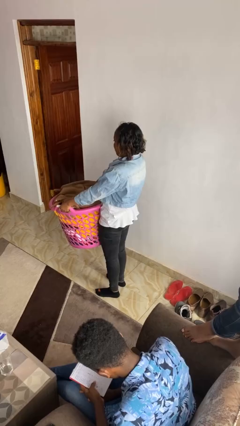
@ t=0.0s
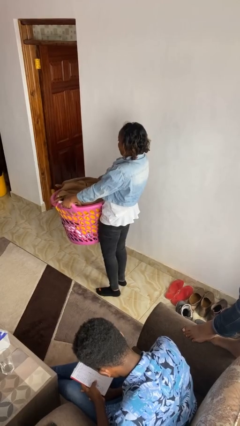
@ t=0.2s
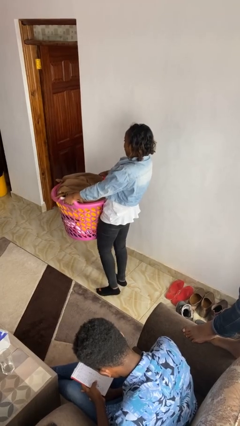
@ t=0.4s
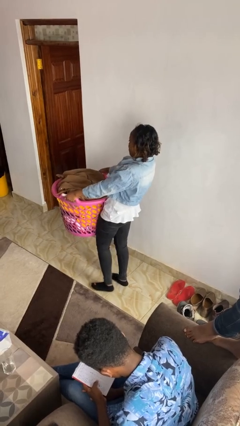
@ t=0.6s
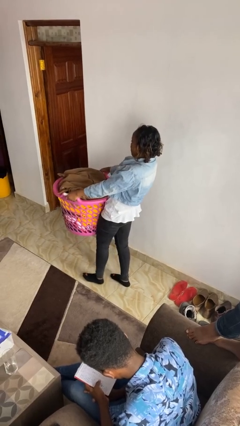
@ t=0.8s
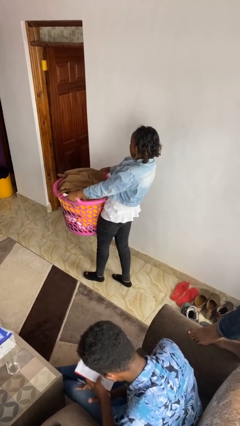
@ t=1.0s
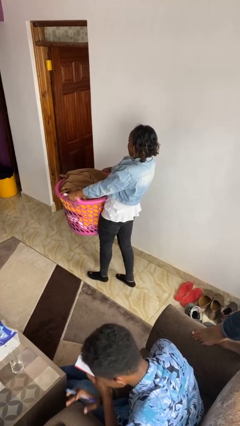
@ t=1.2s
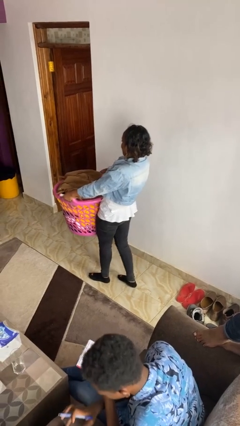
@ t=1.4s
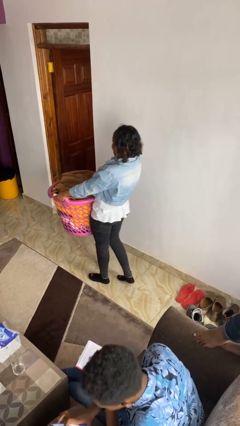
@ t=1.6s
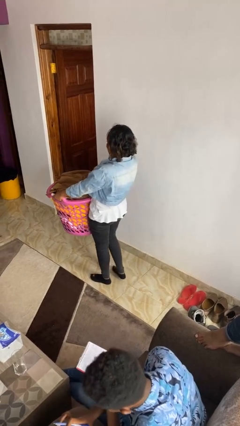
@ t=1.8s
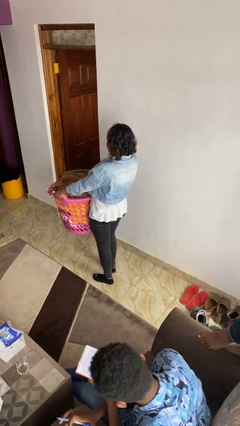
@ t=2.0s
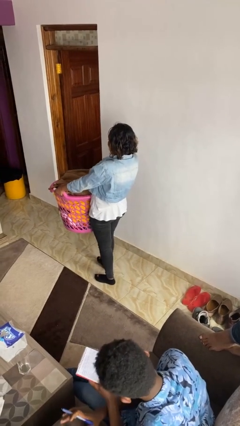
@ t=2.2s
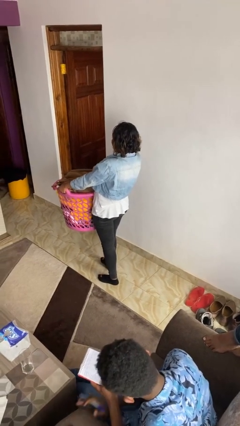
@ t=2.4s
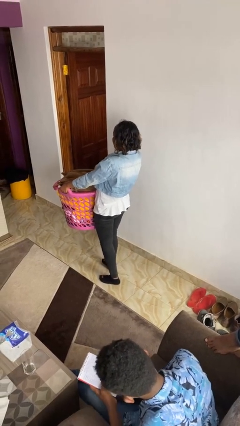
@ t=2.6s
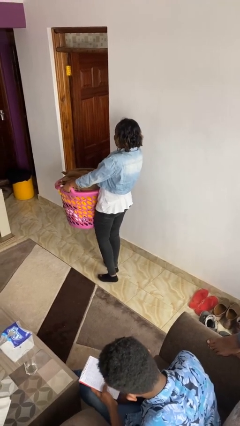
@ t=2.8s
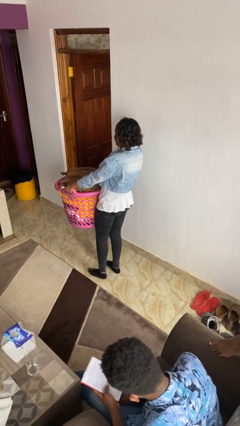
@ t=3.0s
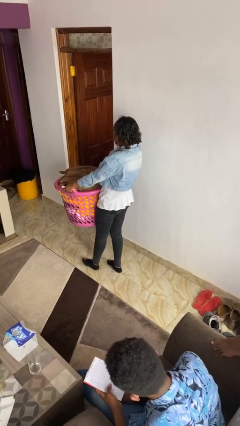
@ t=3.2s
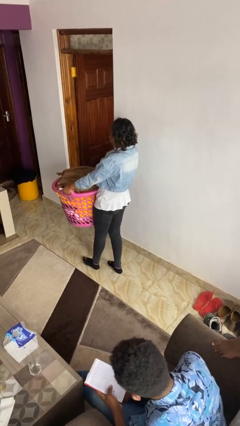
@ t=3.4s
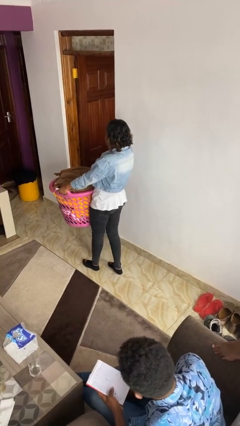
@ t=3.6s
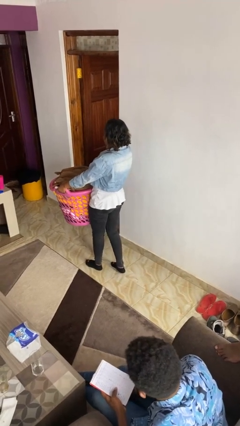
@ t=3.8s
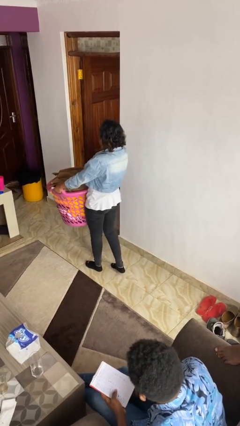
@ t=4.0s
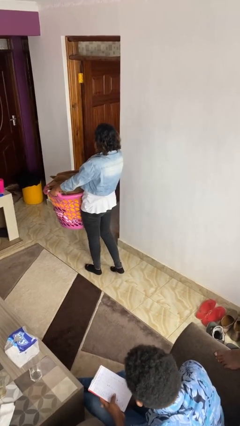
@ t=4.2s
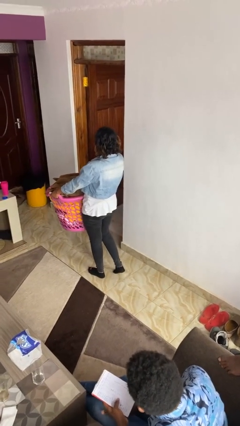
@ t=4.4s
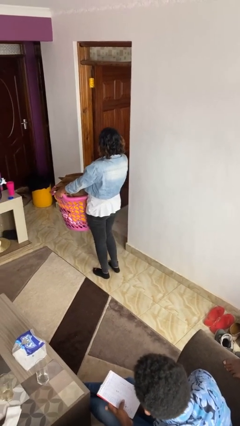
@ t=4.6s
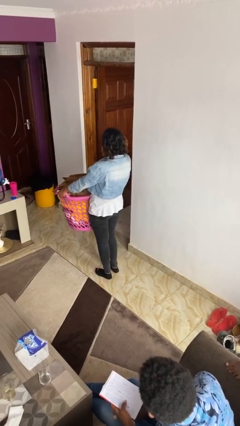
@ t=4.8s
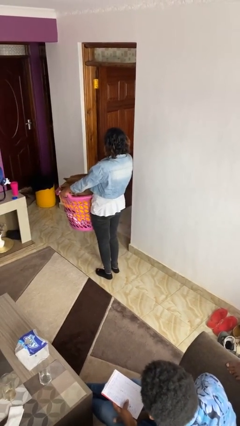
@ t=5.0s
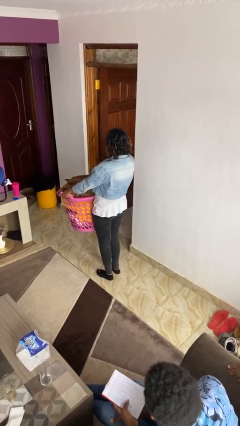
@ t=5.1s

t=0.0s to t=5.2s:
person carries laundry basket

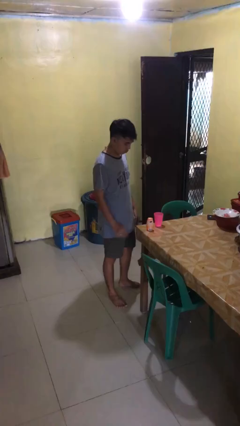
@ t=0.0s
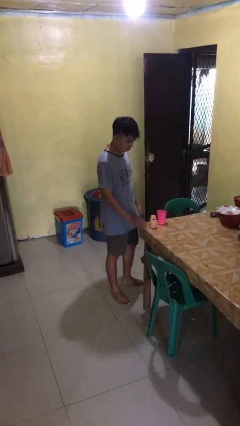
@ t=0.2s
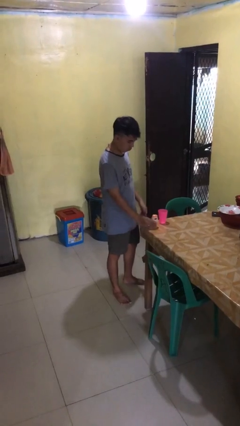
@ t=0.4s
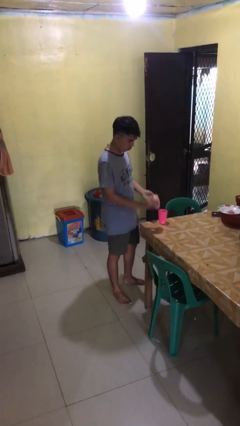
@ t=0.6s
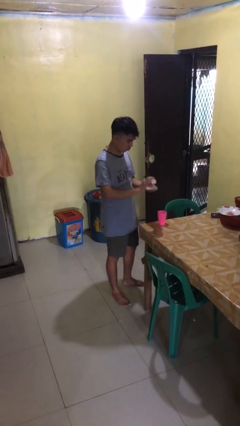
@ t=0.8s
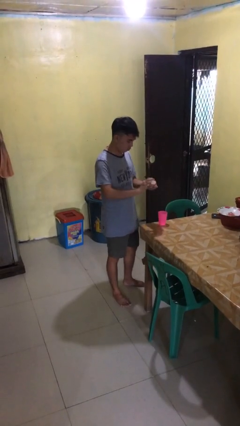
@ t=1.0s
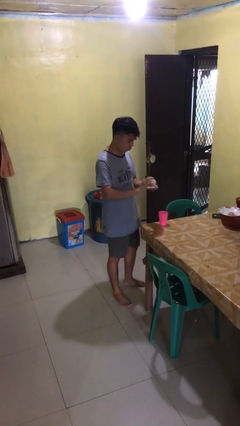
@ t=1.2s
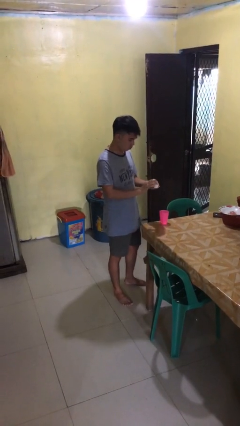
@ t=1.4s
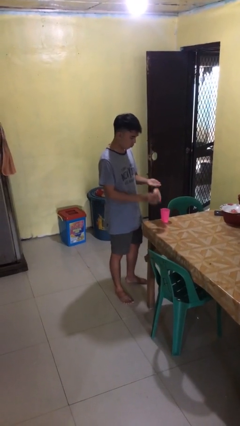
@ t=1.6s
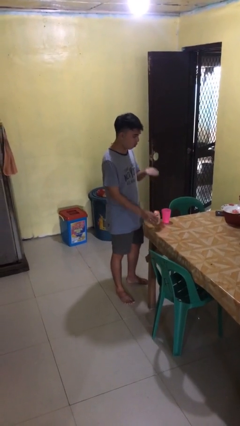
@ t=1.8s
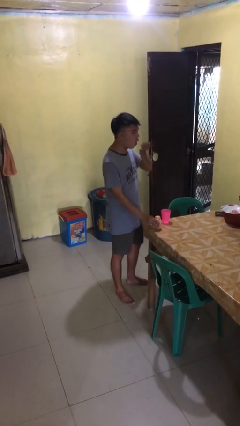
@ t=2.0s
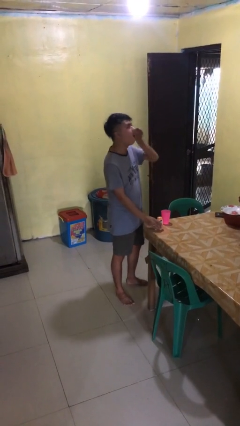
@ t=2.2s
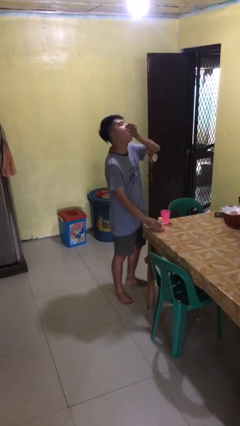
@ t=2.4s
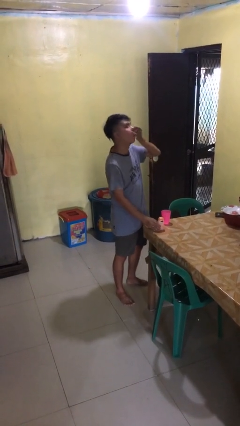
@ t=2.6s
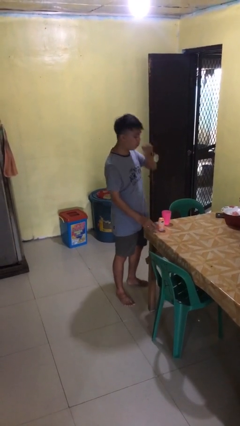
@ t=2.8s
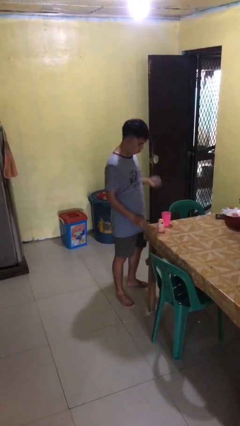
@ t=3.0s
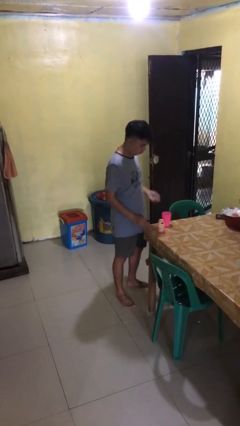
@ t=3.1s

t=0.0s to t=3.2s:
person takes medicine pills

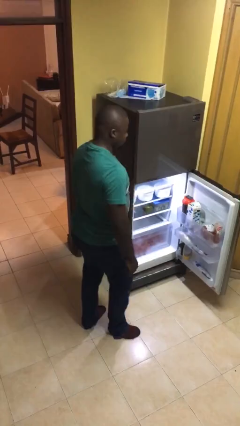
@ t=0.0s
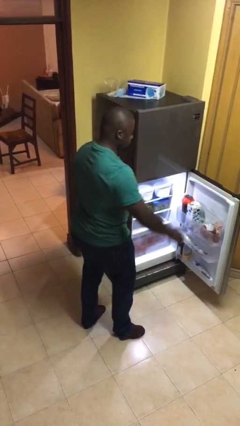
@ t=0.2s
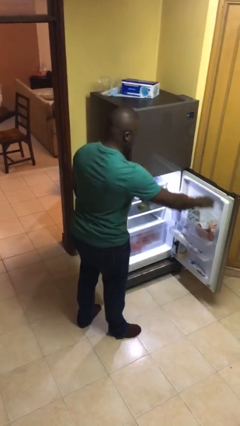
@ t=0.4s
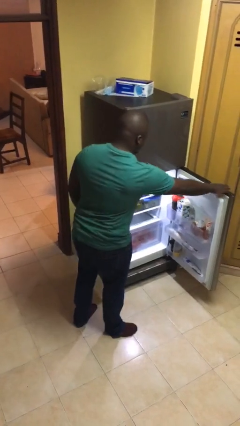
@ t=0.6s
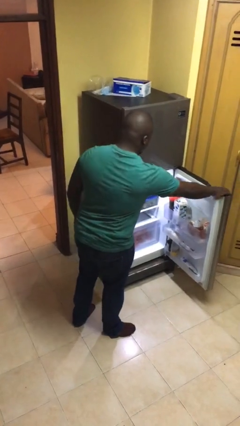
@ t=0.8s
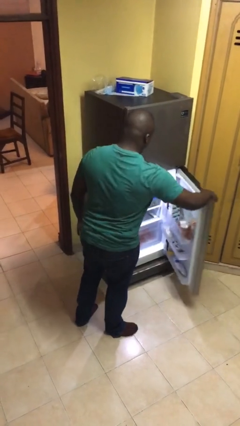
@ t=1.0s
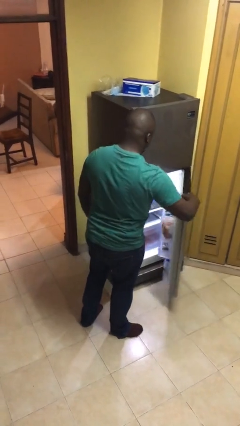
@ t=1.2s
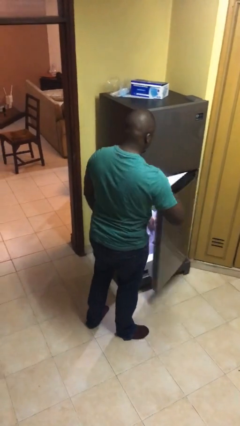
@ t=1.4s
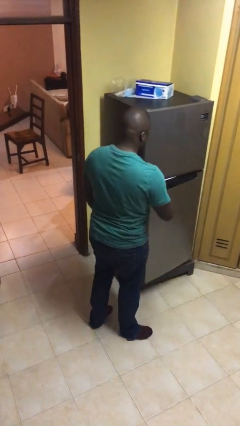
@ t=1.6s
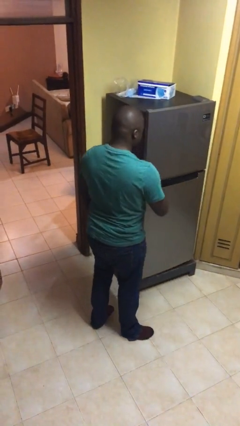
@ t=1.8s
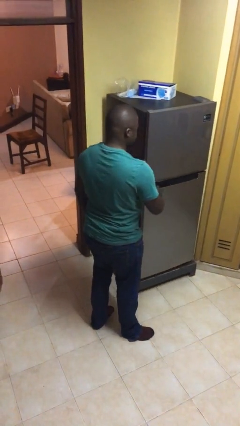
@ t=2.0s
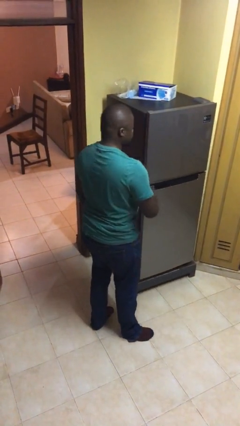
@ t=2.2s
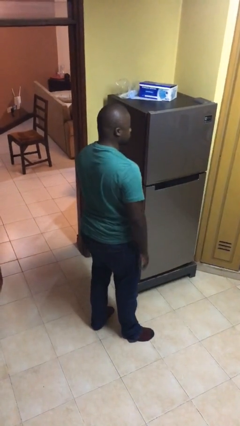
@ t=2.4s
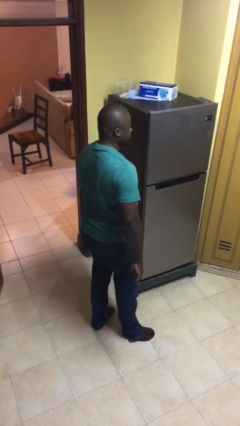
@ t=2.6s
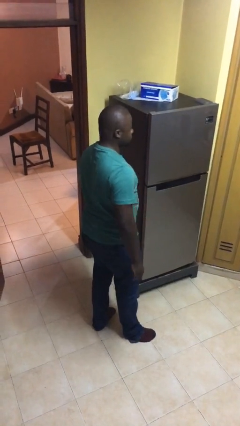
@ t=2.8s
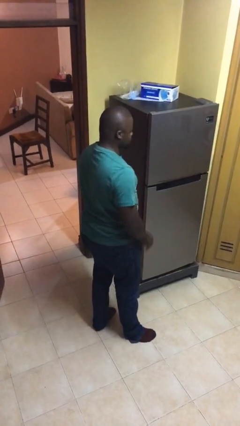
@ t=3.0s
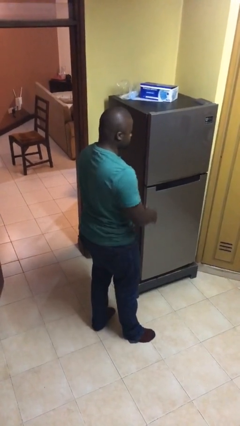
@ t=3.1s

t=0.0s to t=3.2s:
person closes refrigerator

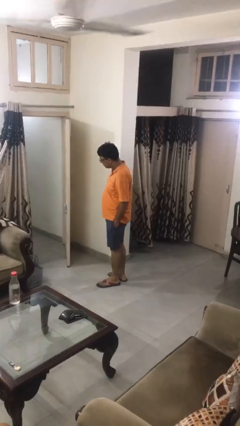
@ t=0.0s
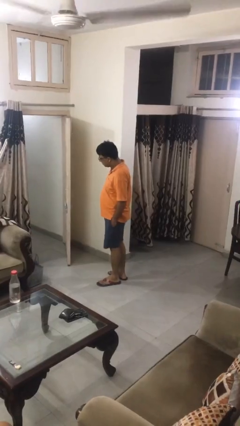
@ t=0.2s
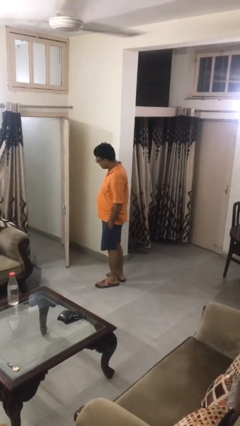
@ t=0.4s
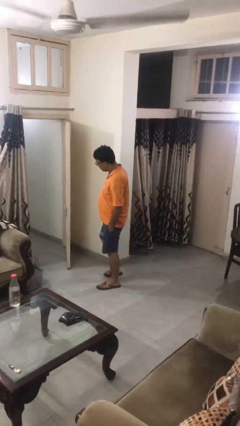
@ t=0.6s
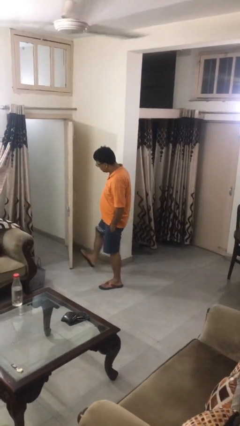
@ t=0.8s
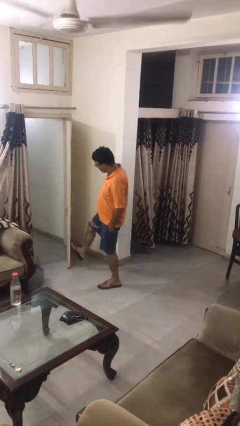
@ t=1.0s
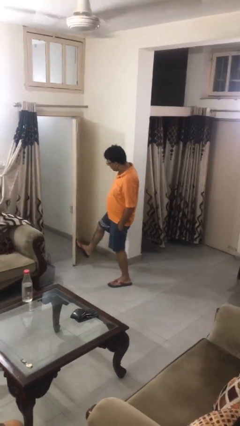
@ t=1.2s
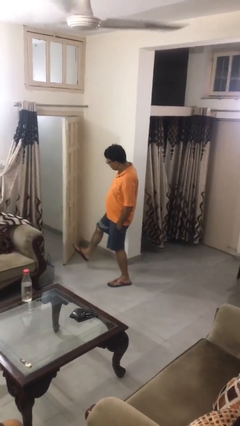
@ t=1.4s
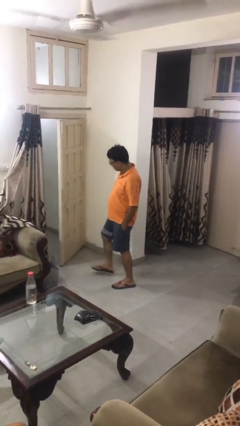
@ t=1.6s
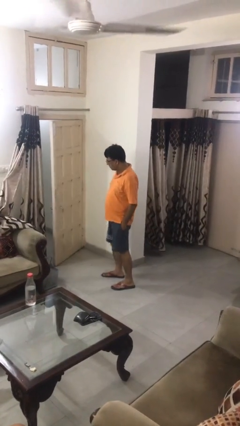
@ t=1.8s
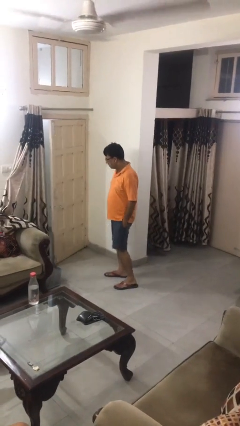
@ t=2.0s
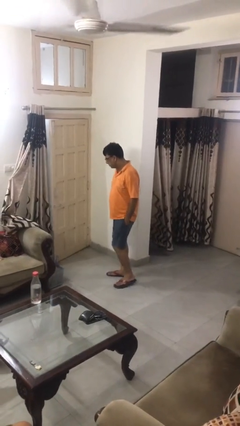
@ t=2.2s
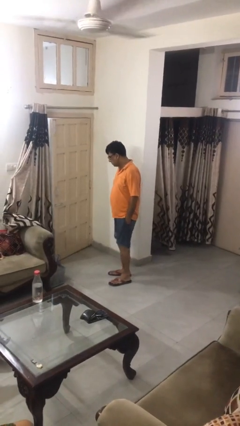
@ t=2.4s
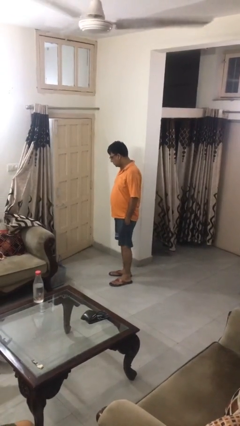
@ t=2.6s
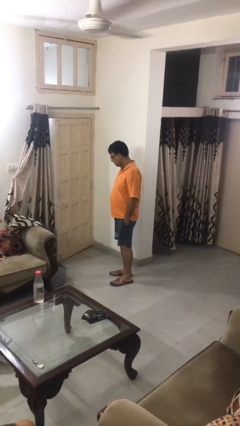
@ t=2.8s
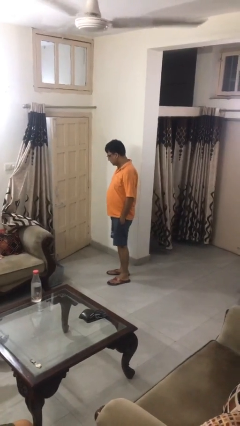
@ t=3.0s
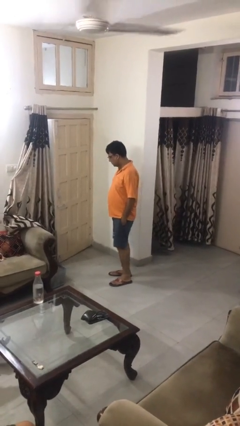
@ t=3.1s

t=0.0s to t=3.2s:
person closes door with foot

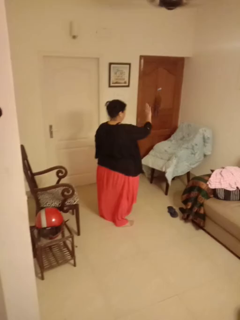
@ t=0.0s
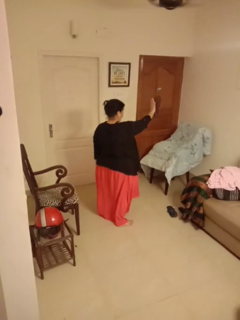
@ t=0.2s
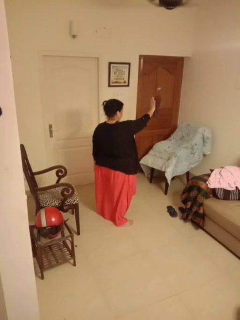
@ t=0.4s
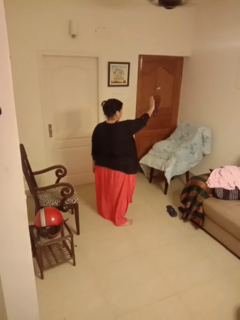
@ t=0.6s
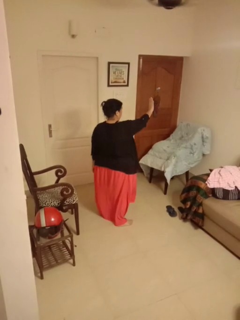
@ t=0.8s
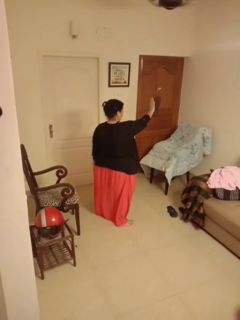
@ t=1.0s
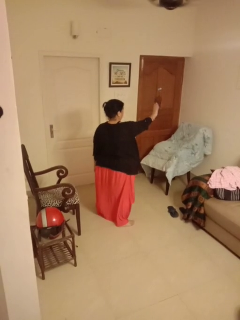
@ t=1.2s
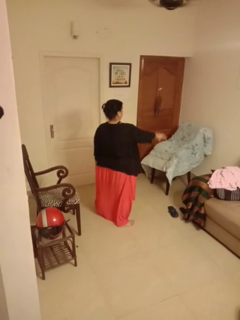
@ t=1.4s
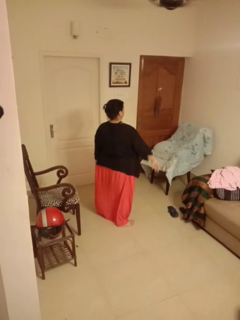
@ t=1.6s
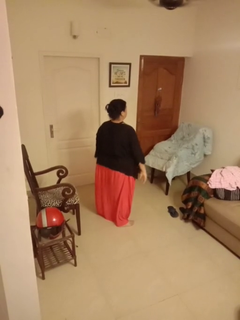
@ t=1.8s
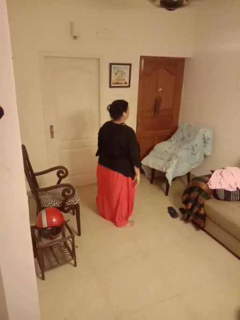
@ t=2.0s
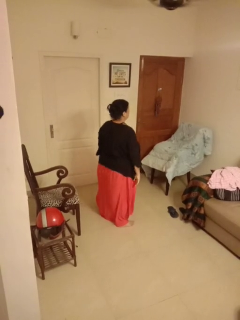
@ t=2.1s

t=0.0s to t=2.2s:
person gestures stop

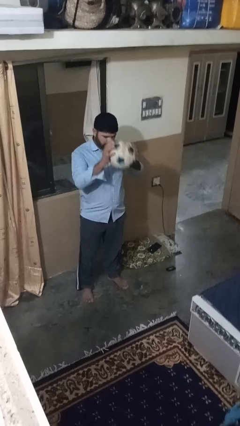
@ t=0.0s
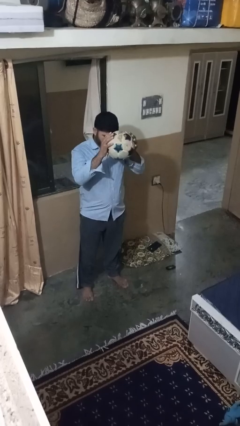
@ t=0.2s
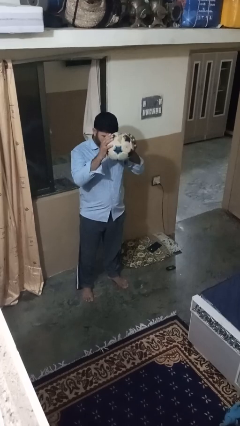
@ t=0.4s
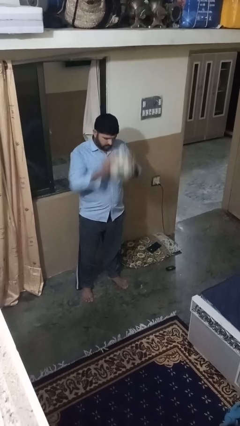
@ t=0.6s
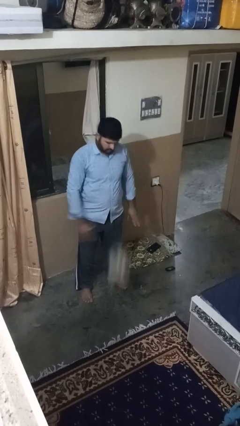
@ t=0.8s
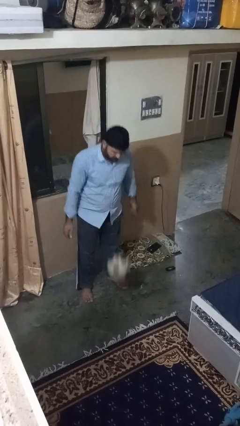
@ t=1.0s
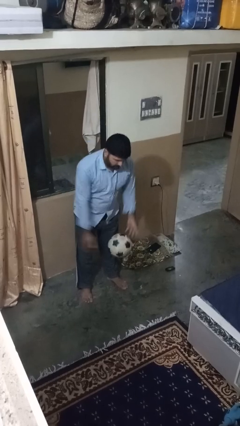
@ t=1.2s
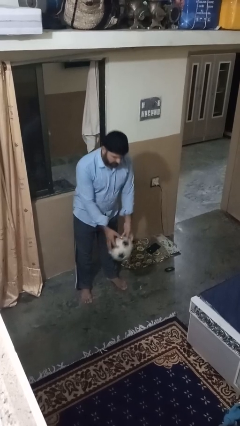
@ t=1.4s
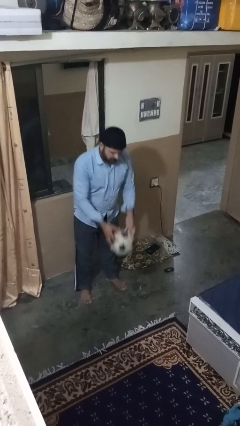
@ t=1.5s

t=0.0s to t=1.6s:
person bounces ball on floor
